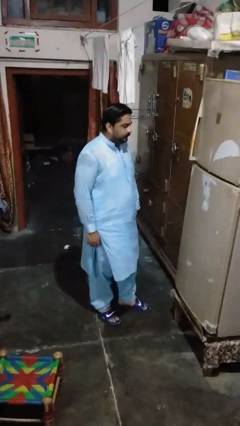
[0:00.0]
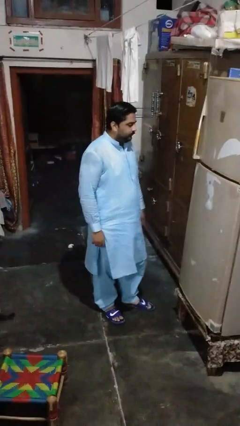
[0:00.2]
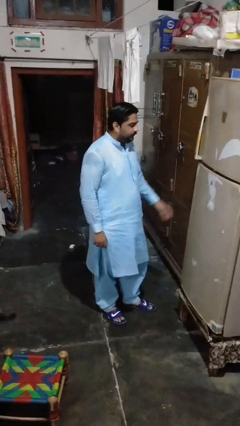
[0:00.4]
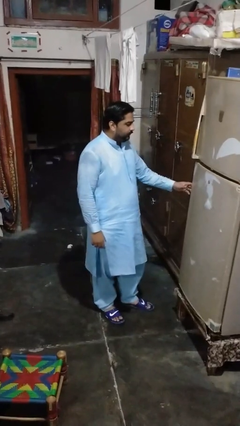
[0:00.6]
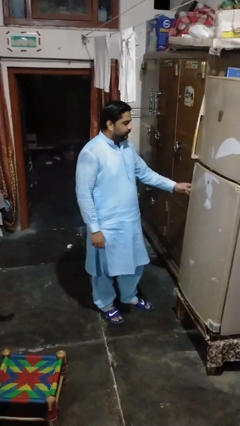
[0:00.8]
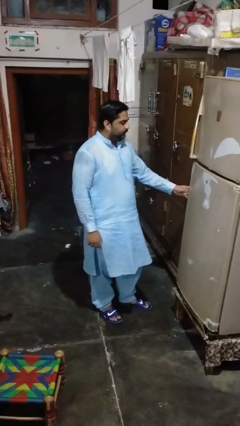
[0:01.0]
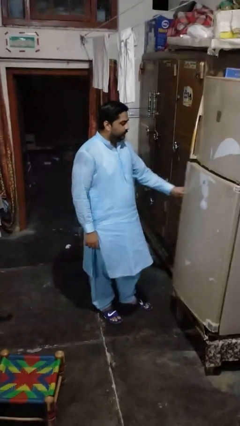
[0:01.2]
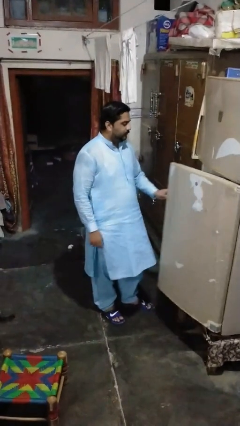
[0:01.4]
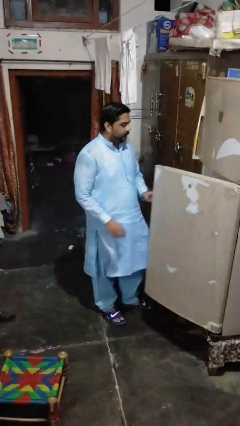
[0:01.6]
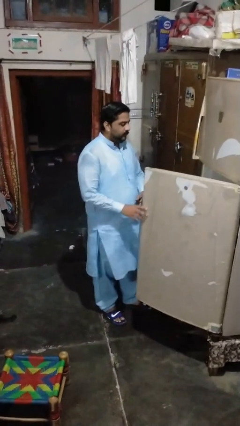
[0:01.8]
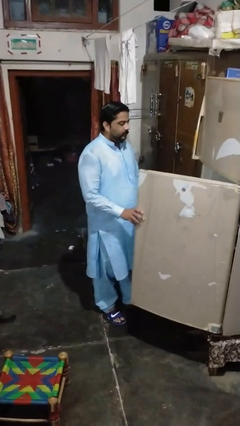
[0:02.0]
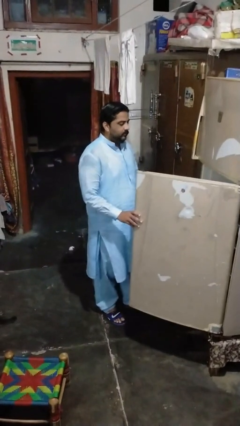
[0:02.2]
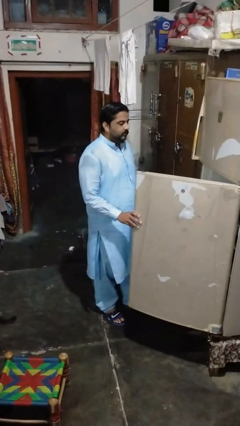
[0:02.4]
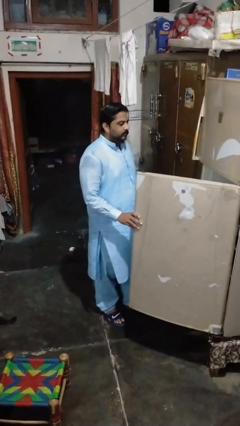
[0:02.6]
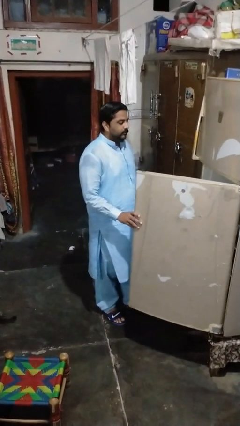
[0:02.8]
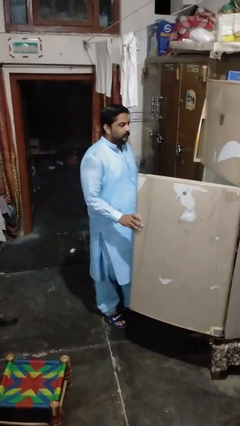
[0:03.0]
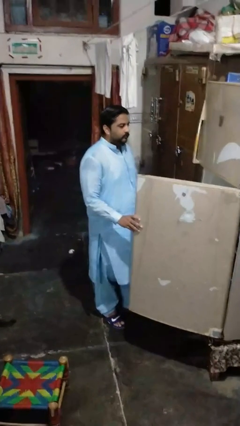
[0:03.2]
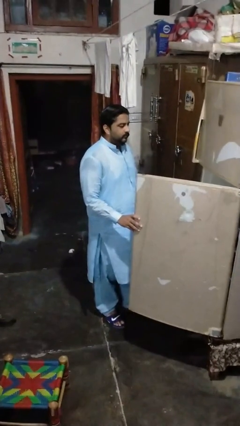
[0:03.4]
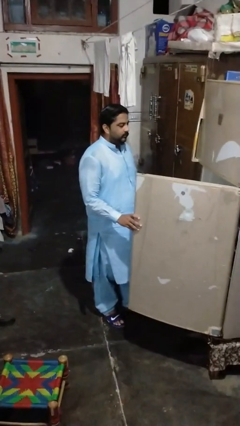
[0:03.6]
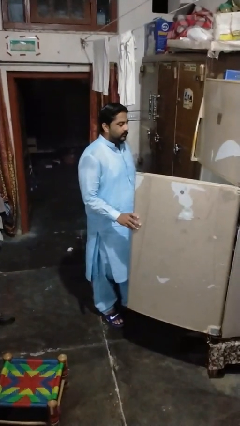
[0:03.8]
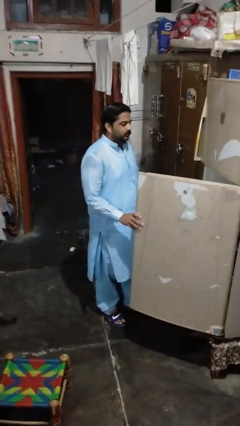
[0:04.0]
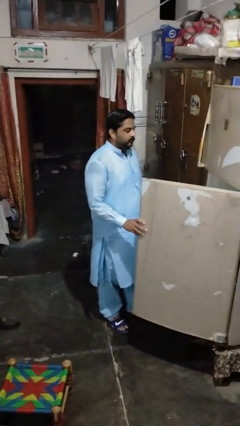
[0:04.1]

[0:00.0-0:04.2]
person opens refrigerator

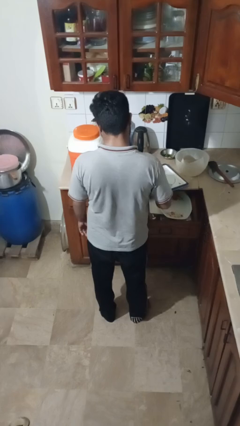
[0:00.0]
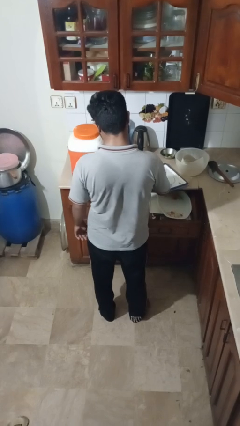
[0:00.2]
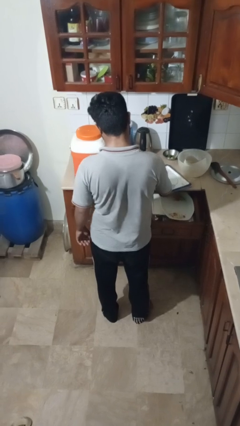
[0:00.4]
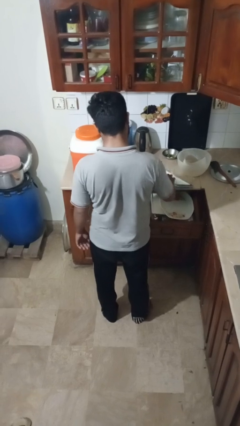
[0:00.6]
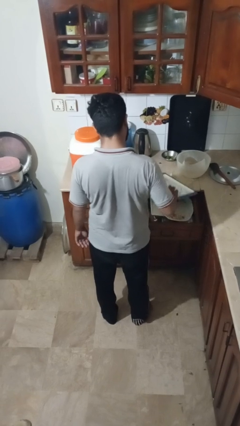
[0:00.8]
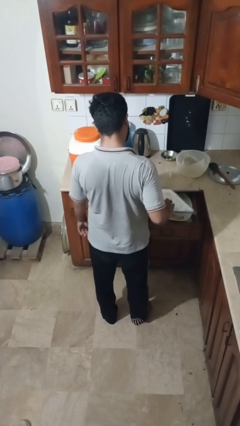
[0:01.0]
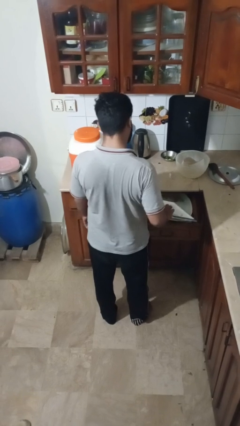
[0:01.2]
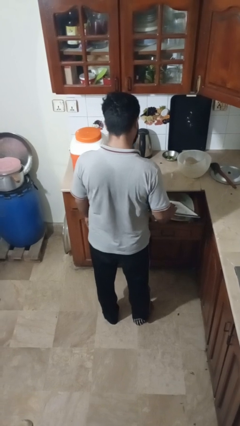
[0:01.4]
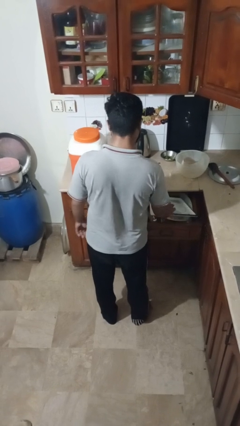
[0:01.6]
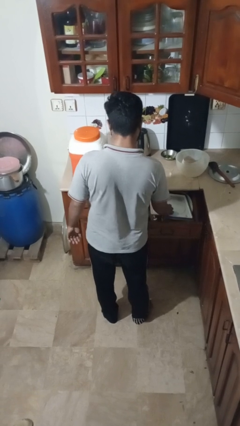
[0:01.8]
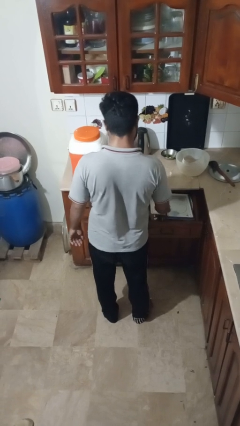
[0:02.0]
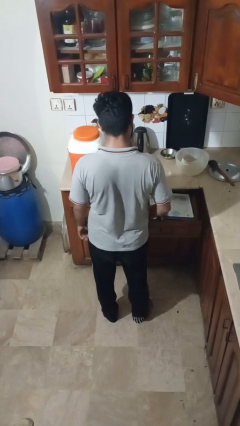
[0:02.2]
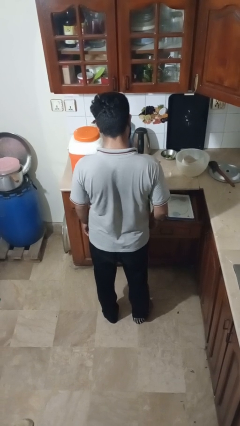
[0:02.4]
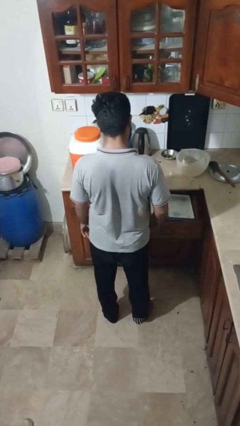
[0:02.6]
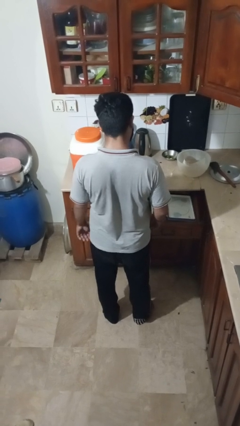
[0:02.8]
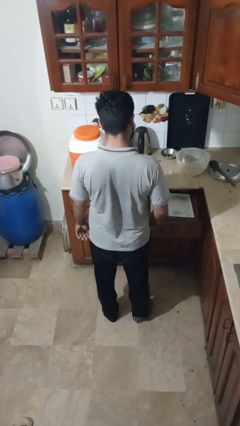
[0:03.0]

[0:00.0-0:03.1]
person puts object into kitchen drawer

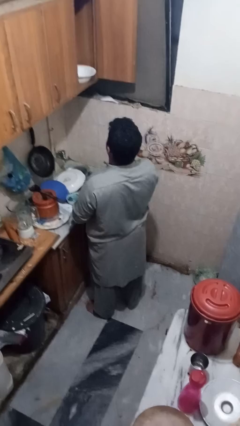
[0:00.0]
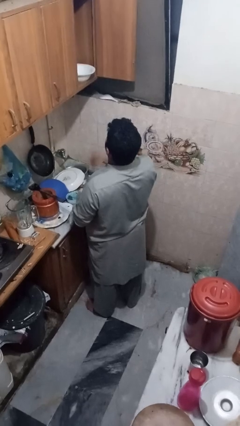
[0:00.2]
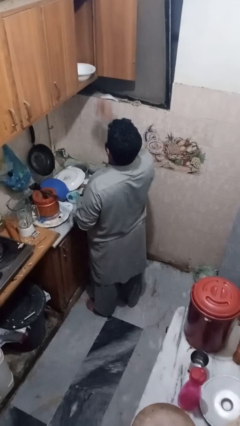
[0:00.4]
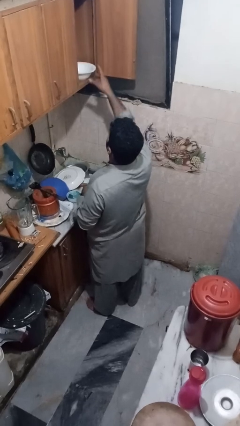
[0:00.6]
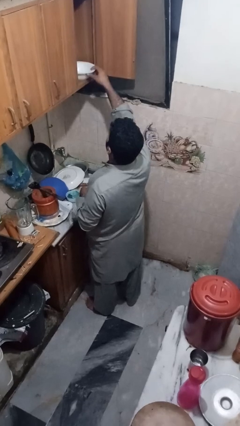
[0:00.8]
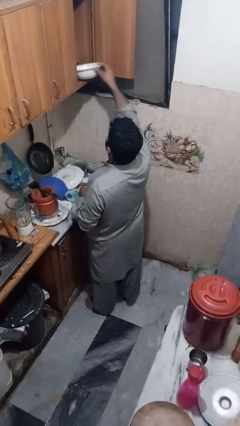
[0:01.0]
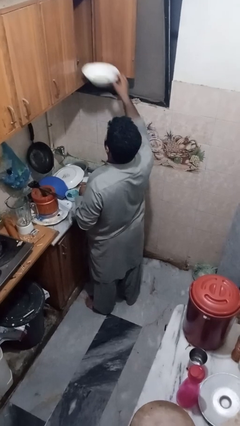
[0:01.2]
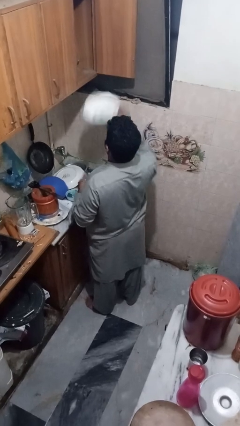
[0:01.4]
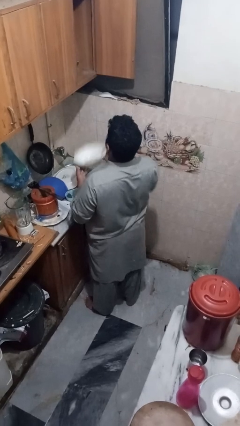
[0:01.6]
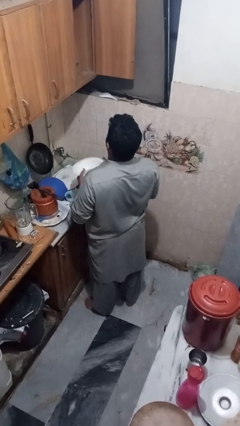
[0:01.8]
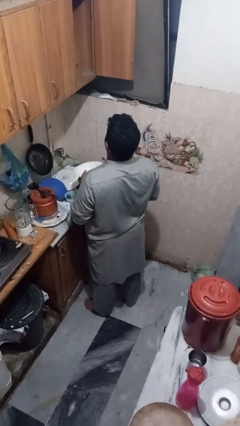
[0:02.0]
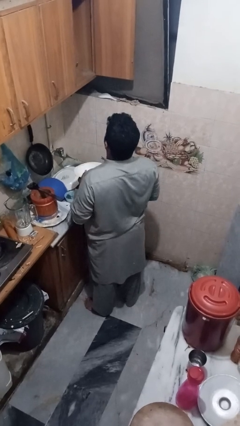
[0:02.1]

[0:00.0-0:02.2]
person takes object from cabinet

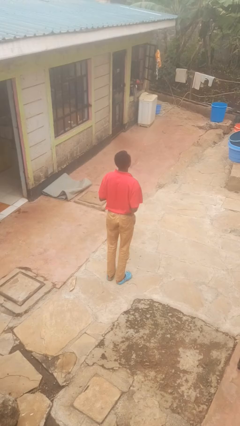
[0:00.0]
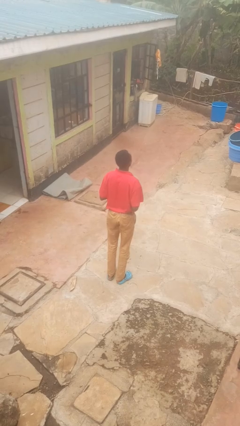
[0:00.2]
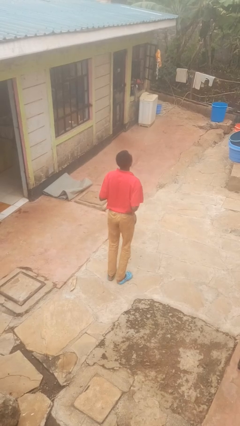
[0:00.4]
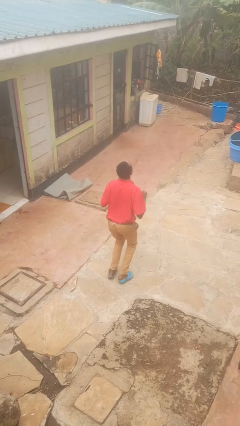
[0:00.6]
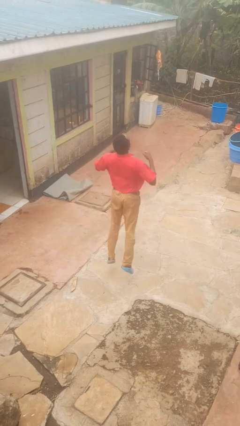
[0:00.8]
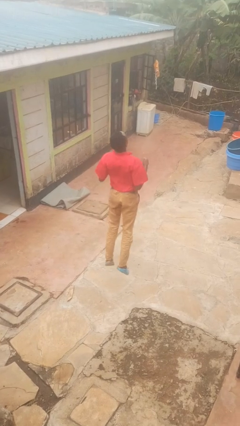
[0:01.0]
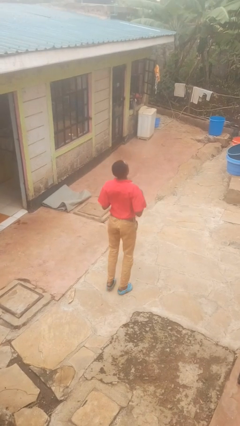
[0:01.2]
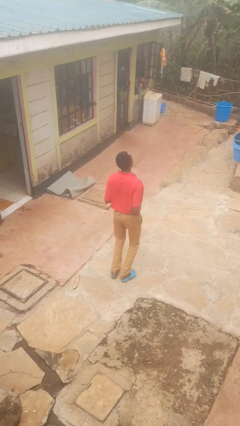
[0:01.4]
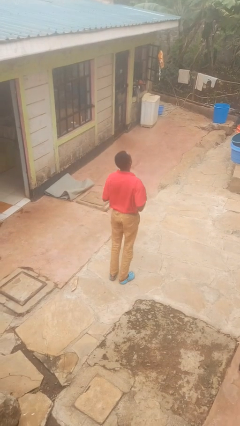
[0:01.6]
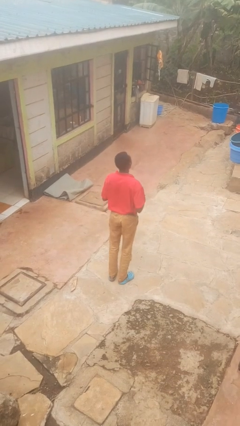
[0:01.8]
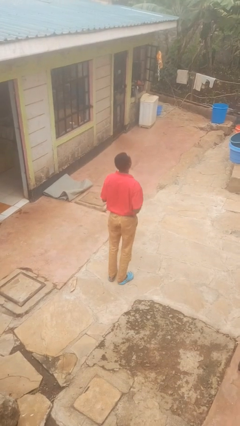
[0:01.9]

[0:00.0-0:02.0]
person jumps

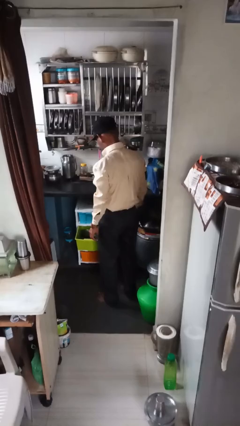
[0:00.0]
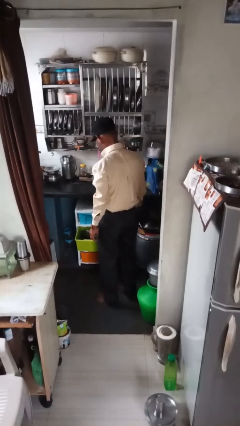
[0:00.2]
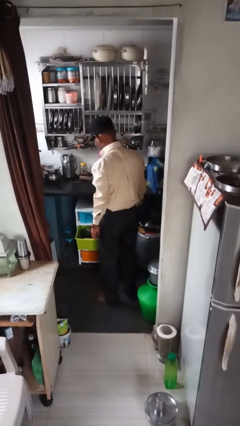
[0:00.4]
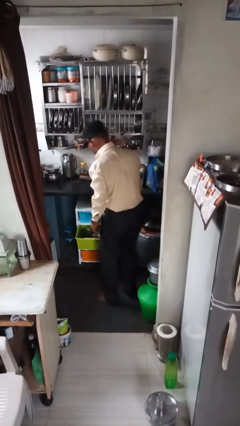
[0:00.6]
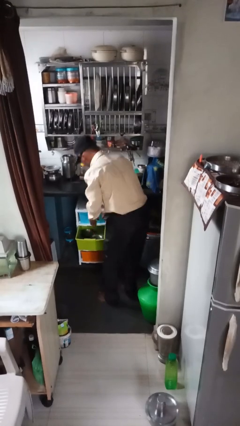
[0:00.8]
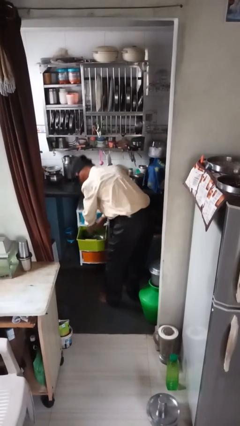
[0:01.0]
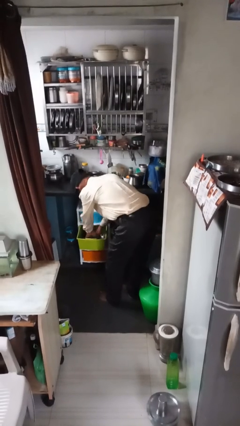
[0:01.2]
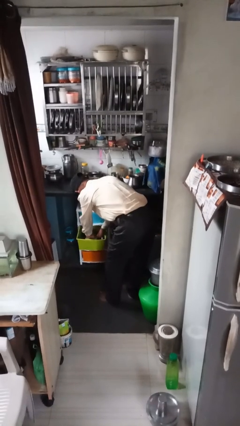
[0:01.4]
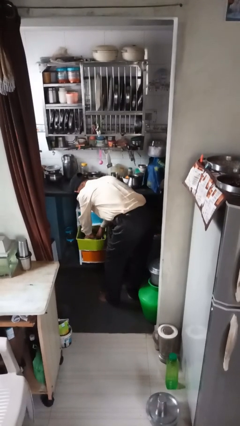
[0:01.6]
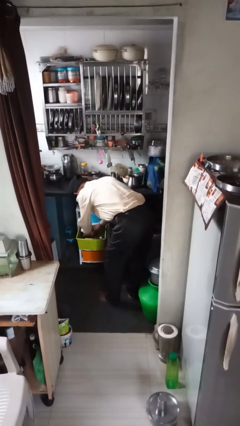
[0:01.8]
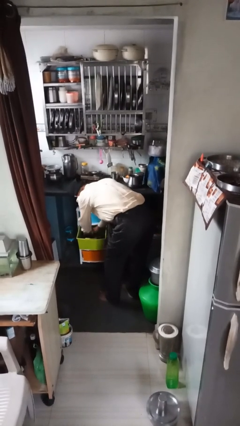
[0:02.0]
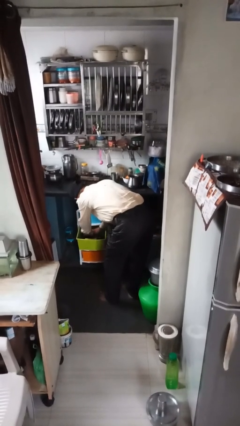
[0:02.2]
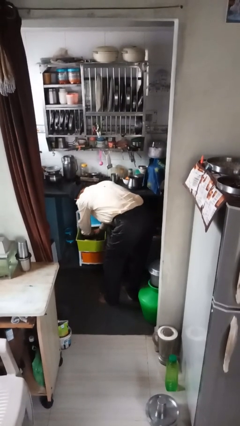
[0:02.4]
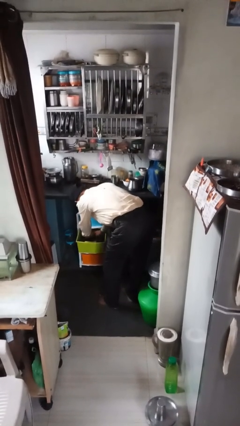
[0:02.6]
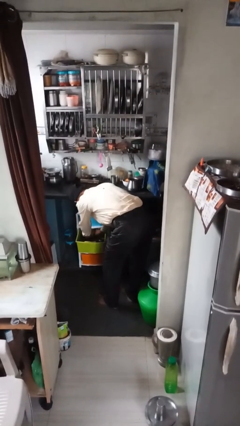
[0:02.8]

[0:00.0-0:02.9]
person searches in kitchen drawer

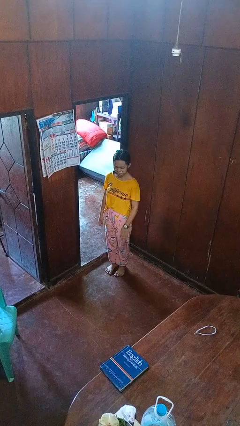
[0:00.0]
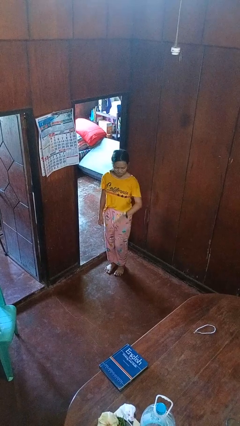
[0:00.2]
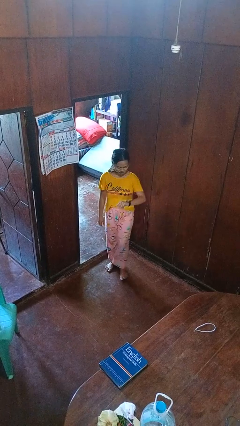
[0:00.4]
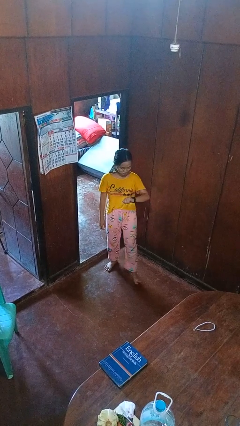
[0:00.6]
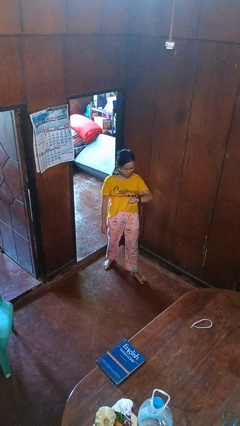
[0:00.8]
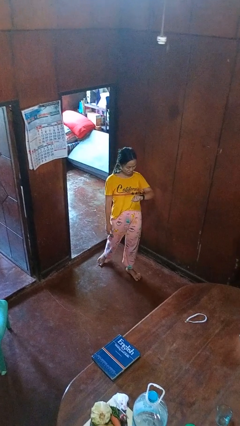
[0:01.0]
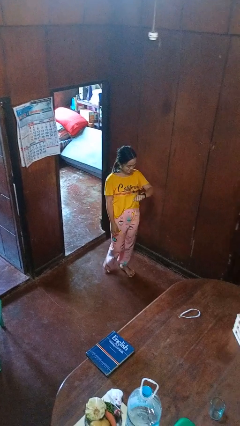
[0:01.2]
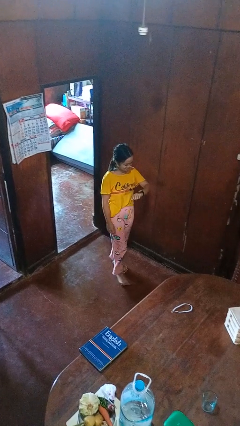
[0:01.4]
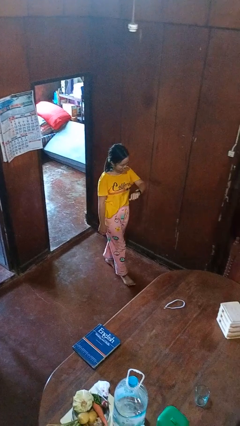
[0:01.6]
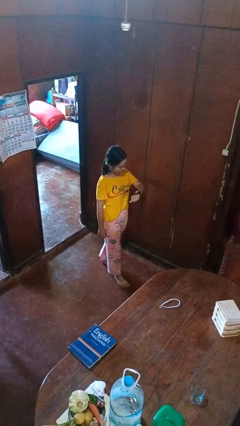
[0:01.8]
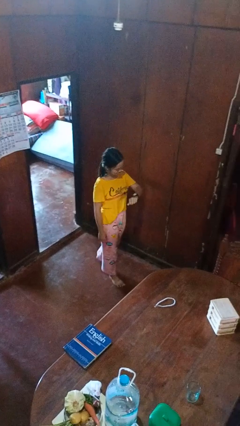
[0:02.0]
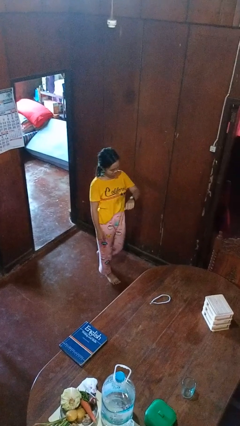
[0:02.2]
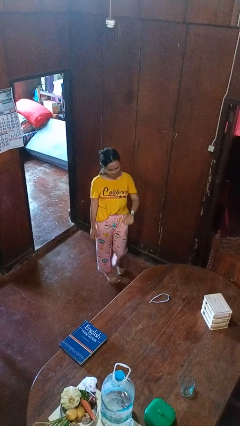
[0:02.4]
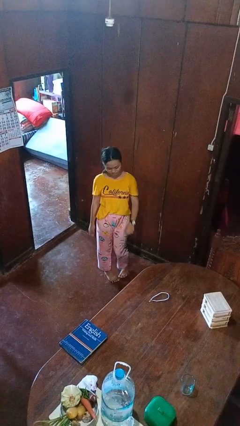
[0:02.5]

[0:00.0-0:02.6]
person looks at wristwatch

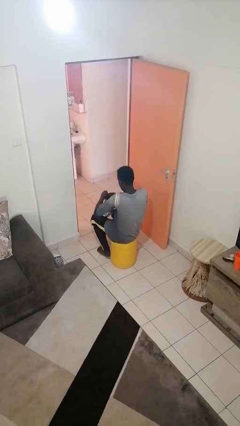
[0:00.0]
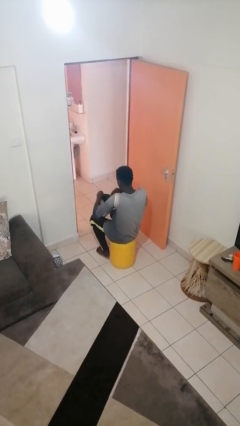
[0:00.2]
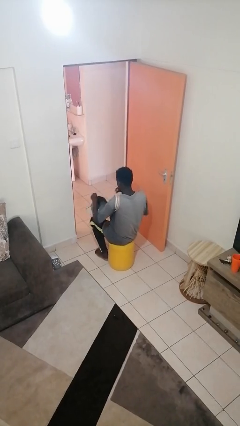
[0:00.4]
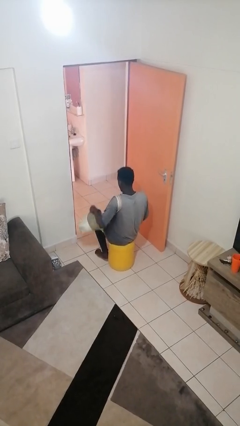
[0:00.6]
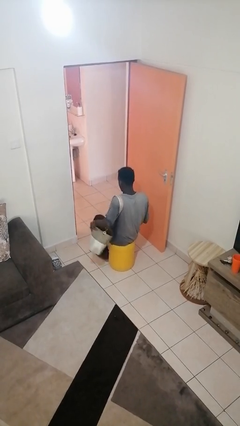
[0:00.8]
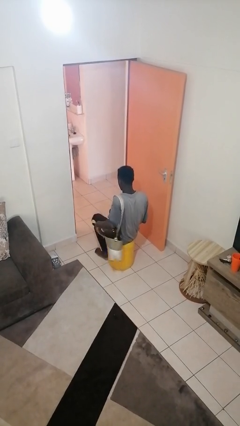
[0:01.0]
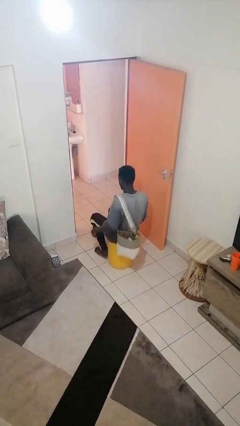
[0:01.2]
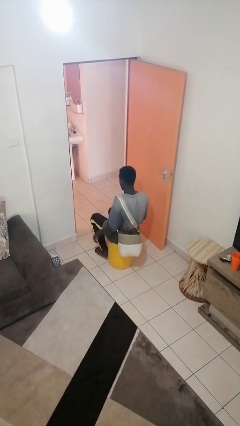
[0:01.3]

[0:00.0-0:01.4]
person puts object into purse
